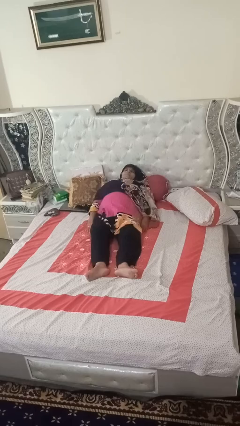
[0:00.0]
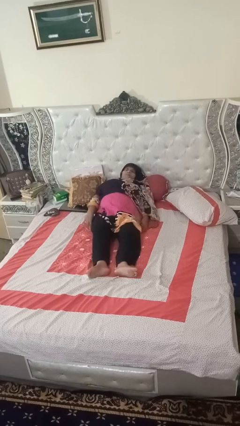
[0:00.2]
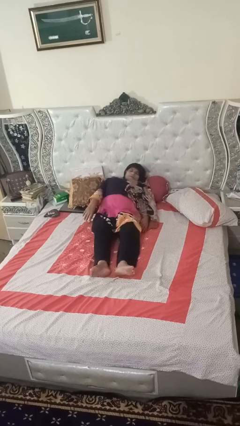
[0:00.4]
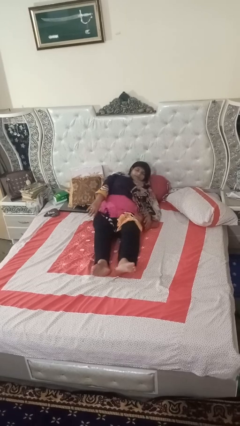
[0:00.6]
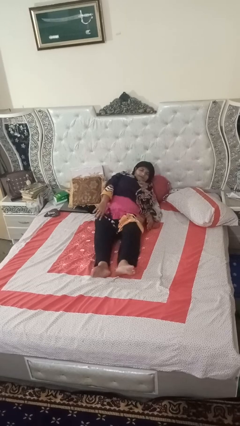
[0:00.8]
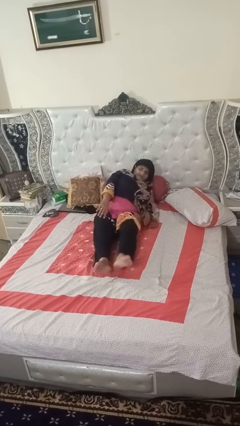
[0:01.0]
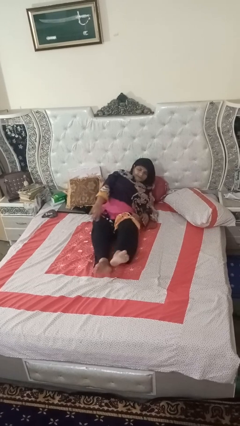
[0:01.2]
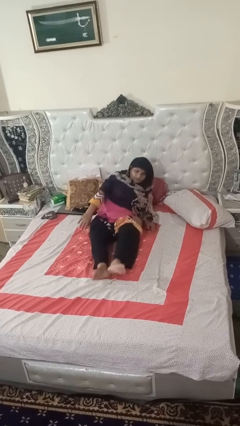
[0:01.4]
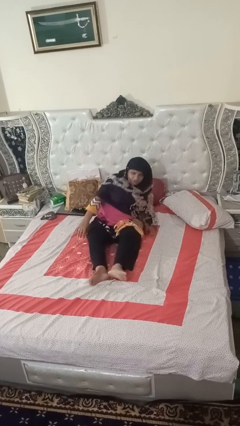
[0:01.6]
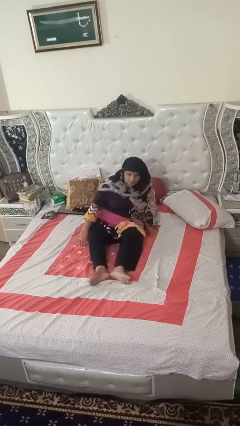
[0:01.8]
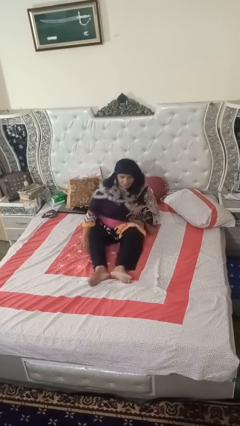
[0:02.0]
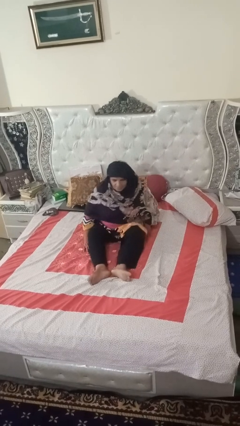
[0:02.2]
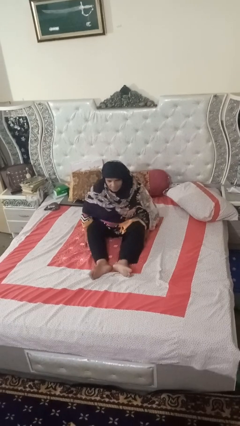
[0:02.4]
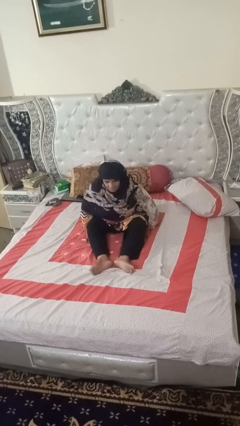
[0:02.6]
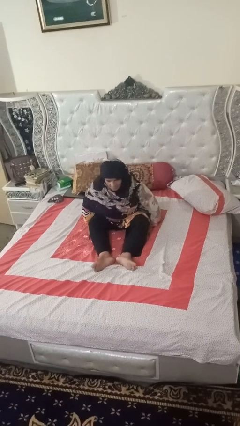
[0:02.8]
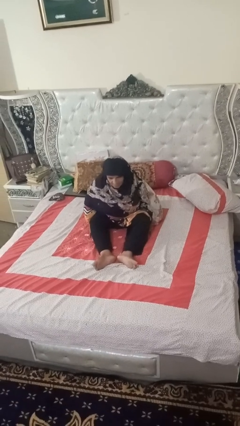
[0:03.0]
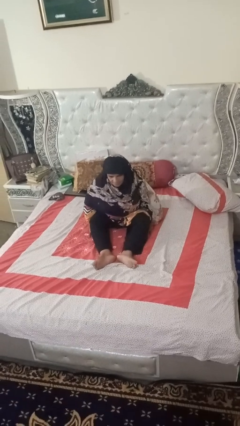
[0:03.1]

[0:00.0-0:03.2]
person stands up

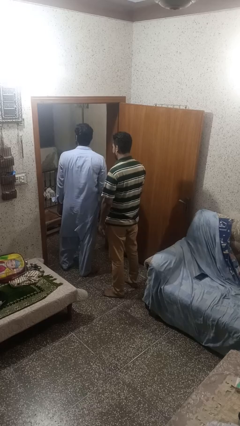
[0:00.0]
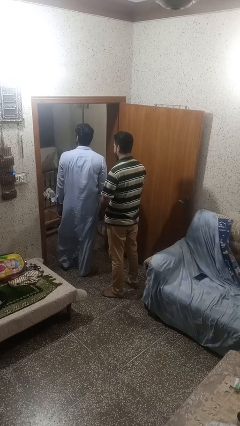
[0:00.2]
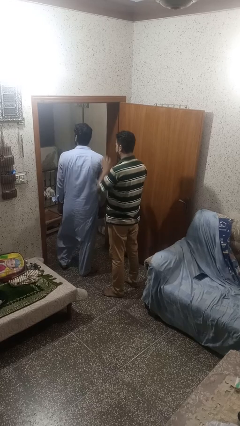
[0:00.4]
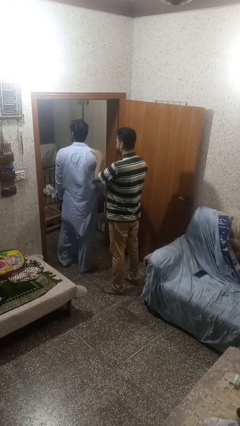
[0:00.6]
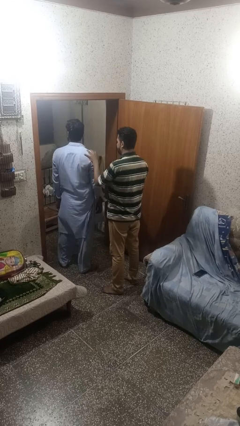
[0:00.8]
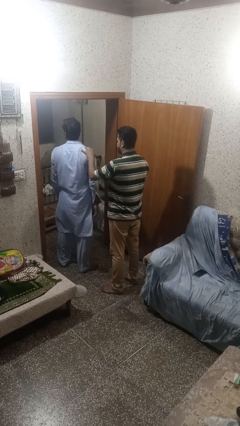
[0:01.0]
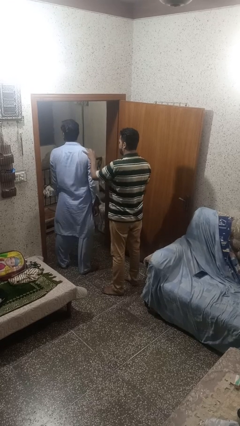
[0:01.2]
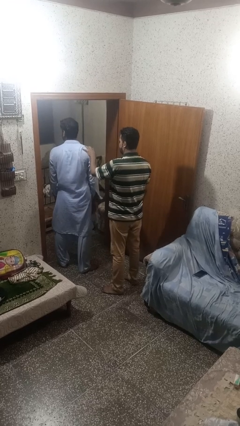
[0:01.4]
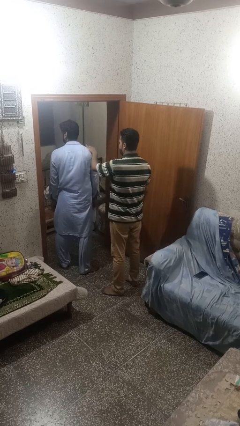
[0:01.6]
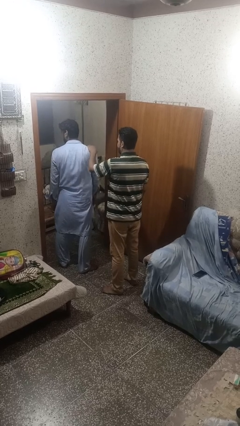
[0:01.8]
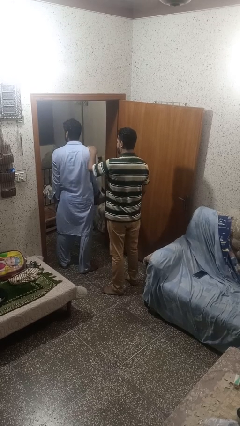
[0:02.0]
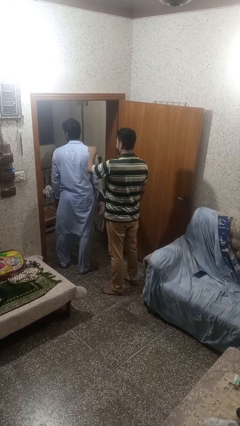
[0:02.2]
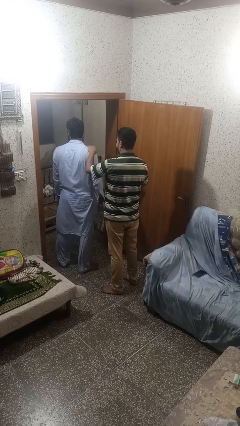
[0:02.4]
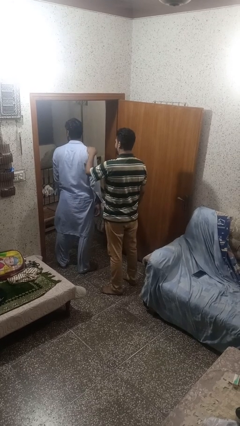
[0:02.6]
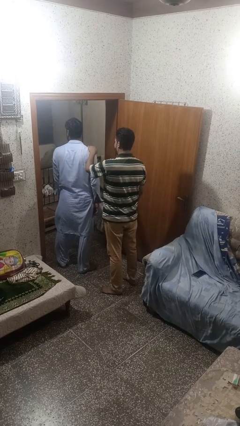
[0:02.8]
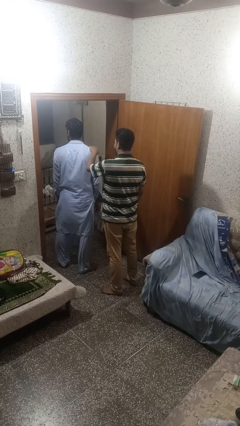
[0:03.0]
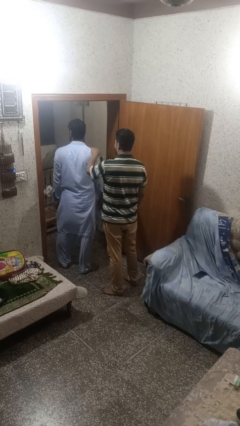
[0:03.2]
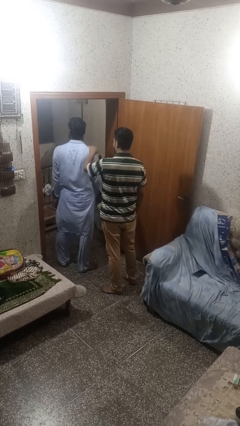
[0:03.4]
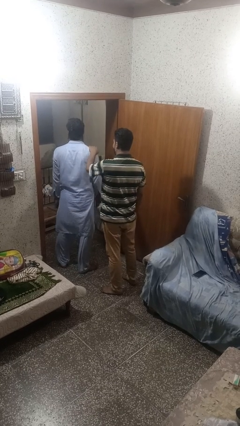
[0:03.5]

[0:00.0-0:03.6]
person grabs person by shoulder

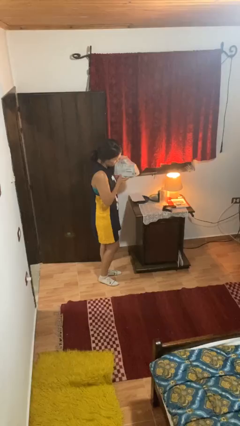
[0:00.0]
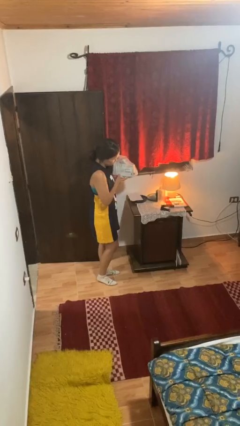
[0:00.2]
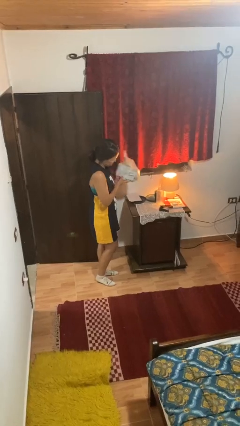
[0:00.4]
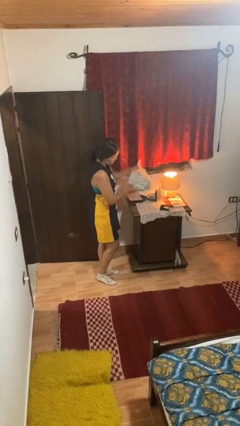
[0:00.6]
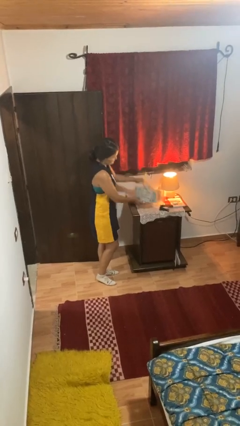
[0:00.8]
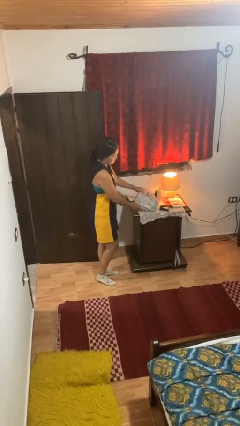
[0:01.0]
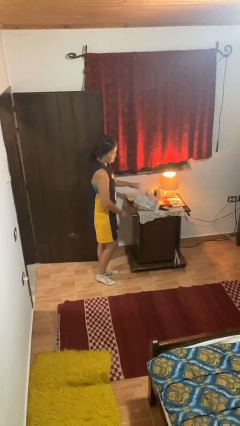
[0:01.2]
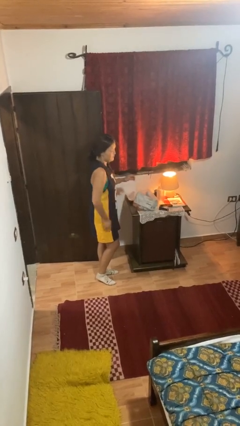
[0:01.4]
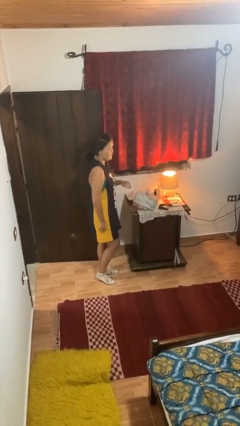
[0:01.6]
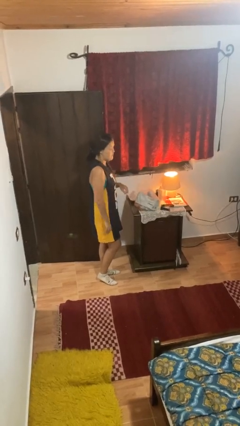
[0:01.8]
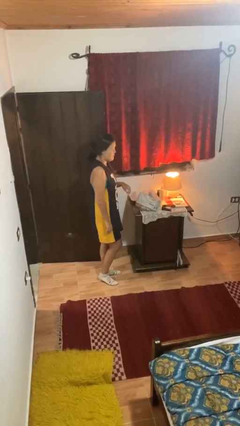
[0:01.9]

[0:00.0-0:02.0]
person puts down object on countertop

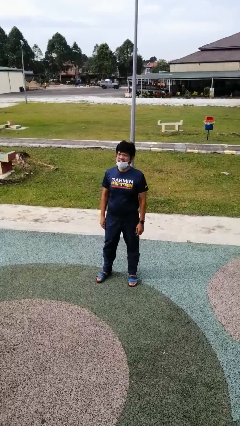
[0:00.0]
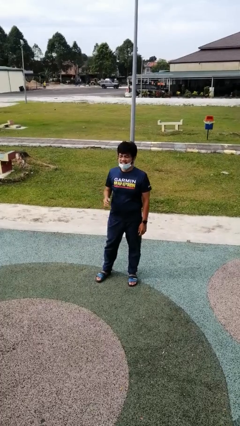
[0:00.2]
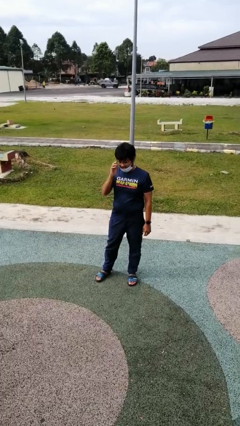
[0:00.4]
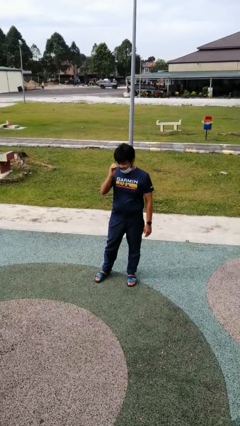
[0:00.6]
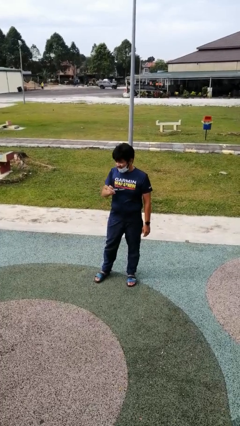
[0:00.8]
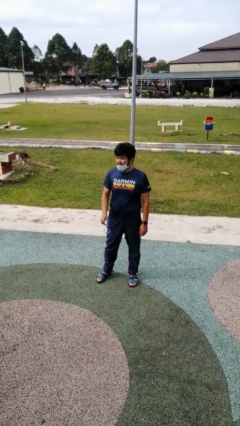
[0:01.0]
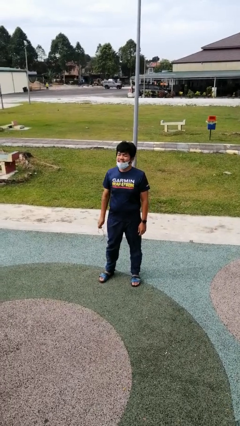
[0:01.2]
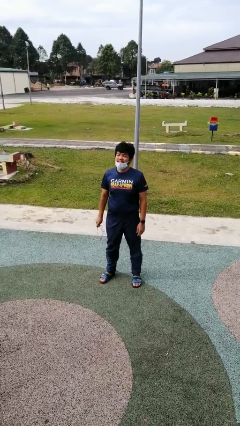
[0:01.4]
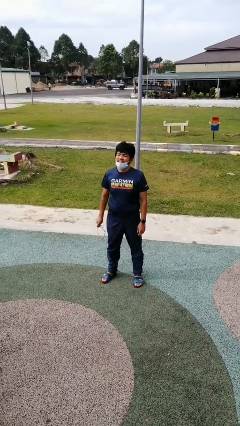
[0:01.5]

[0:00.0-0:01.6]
person takes off glasses

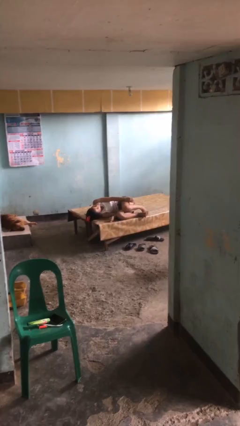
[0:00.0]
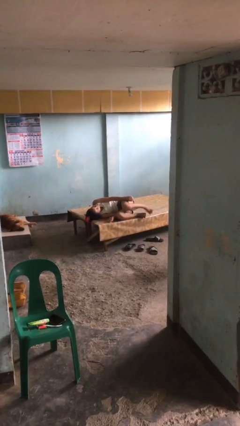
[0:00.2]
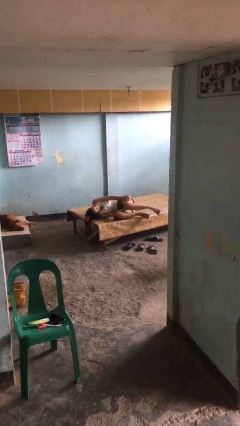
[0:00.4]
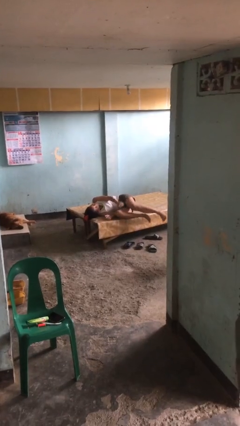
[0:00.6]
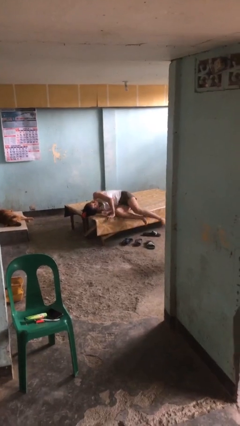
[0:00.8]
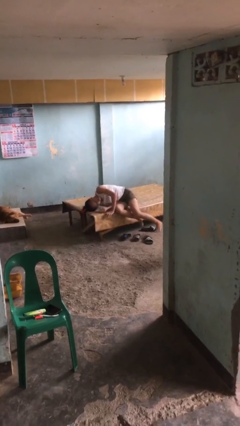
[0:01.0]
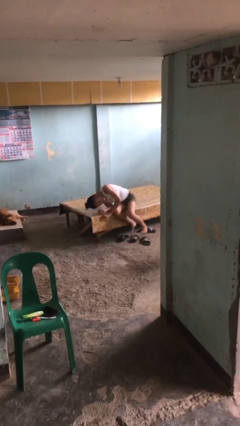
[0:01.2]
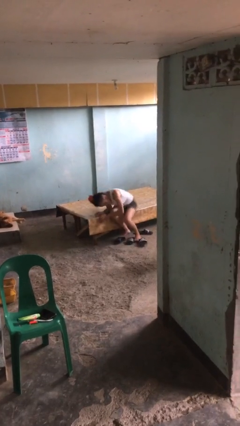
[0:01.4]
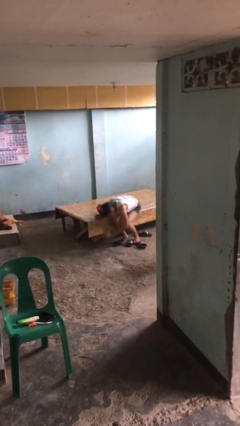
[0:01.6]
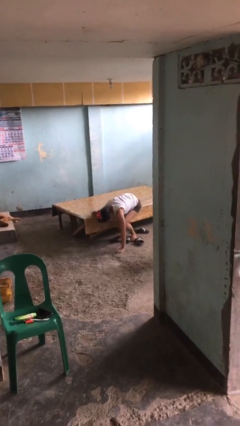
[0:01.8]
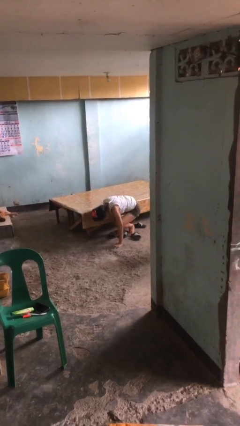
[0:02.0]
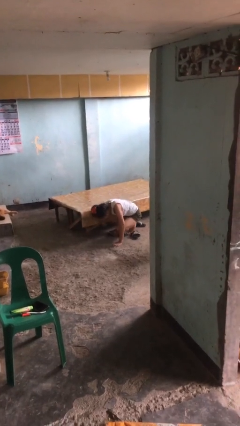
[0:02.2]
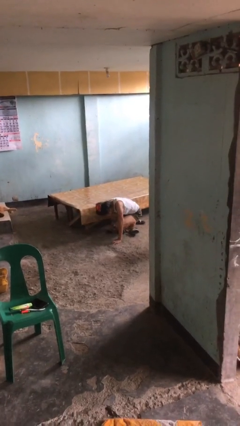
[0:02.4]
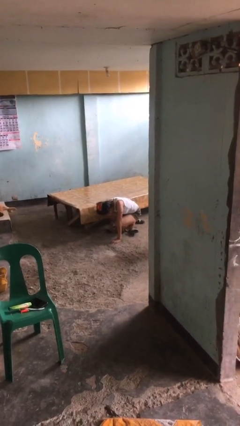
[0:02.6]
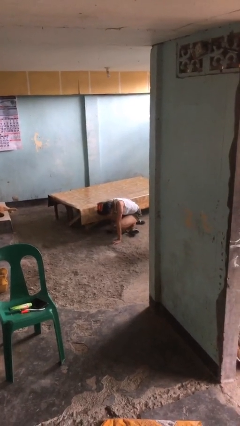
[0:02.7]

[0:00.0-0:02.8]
person falls from bed

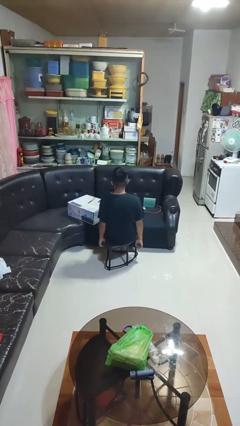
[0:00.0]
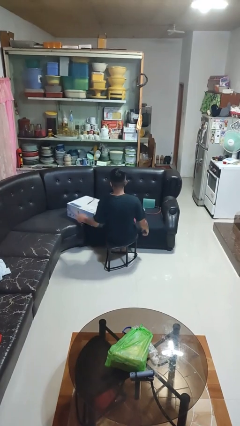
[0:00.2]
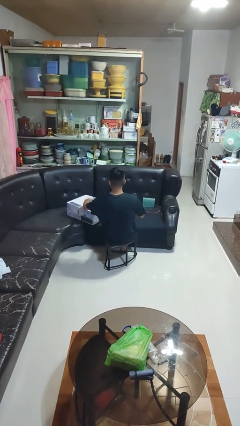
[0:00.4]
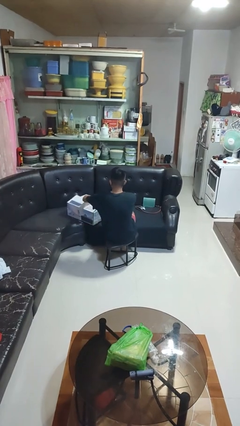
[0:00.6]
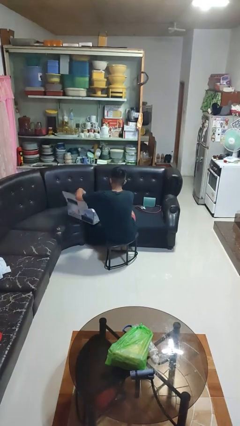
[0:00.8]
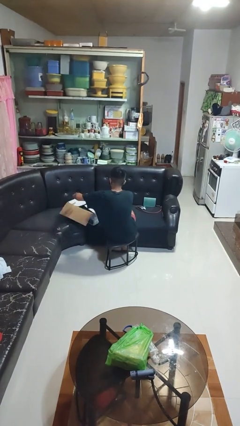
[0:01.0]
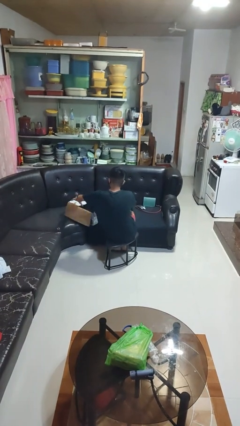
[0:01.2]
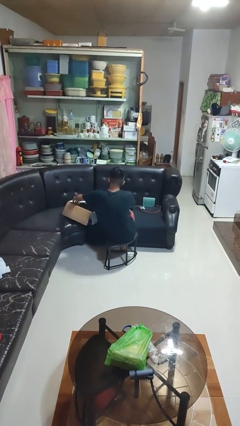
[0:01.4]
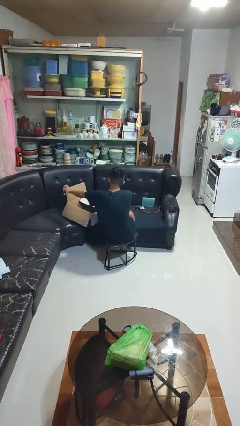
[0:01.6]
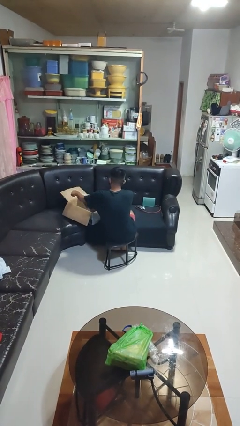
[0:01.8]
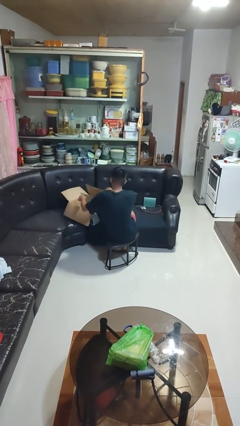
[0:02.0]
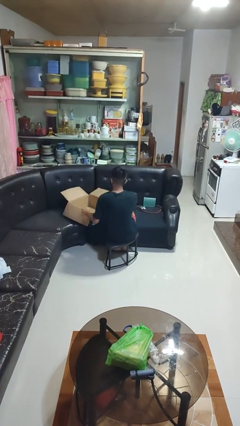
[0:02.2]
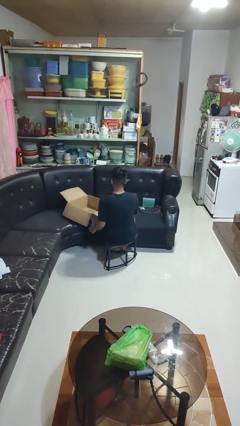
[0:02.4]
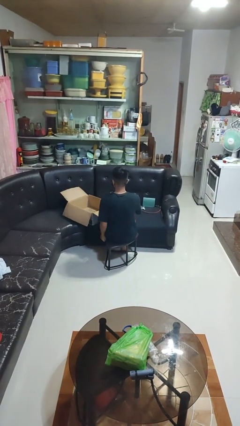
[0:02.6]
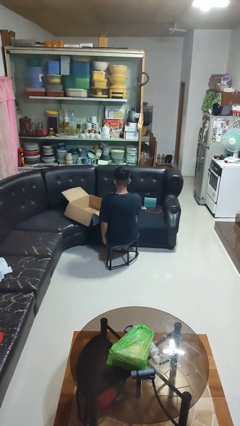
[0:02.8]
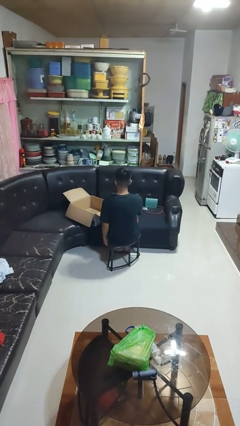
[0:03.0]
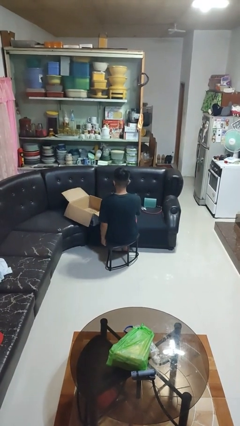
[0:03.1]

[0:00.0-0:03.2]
person opens box

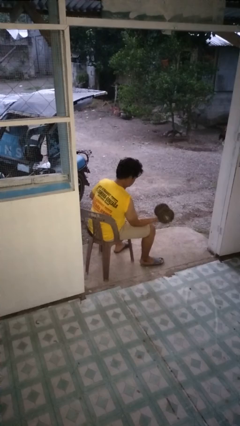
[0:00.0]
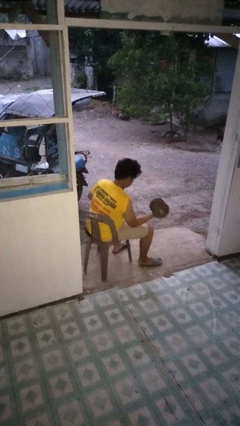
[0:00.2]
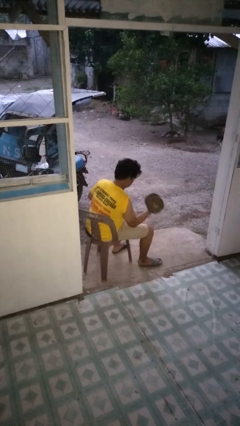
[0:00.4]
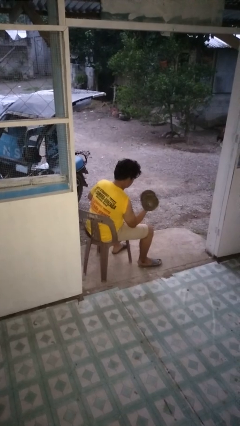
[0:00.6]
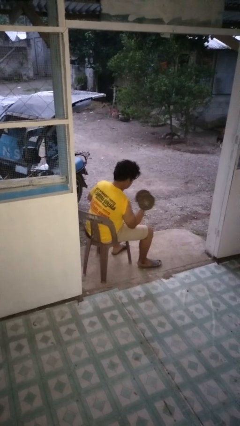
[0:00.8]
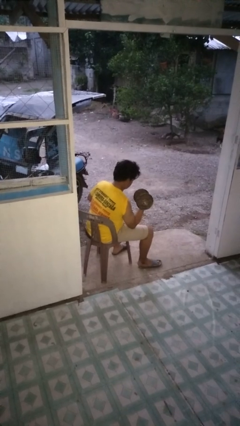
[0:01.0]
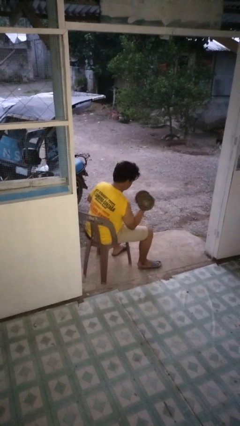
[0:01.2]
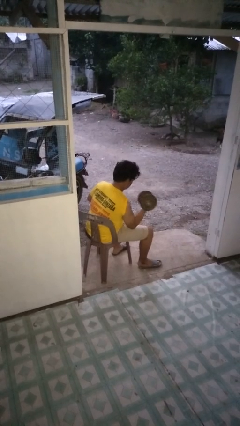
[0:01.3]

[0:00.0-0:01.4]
person lifts dumbbells
